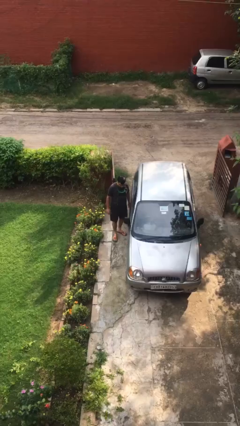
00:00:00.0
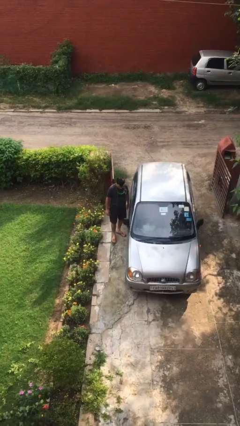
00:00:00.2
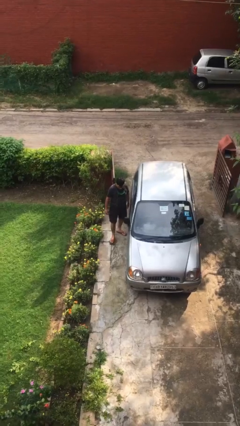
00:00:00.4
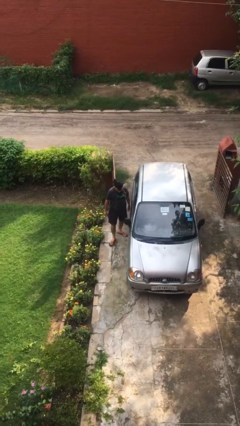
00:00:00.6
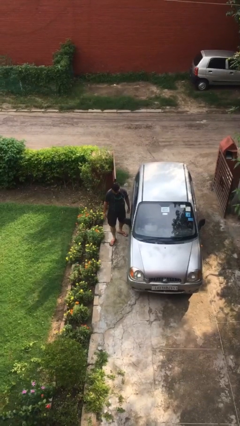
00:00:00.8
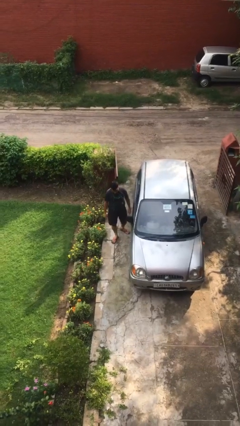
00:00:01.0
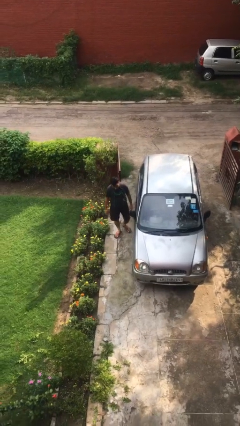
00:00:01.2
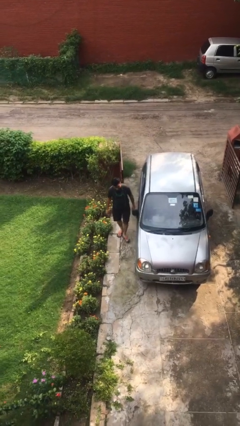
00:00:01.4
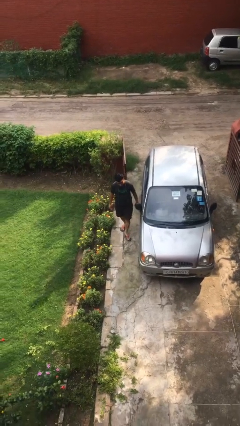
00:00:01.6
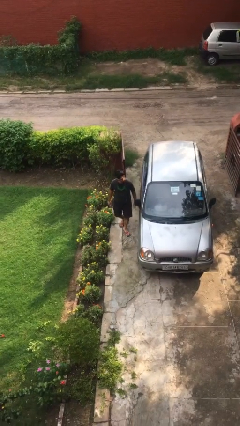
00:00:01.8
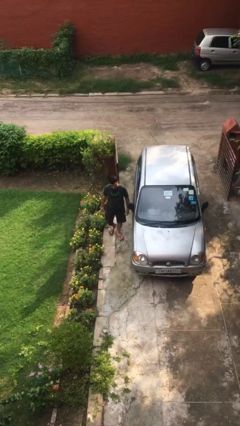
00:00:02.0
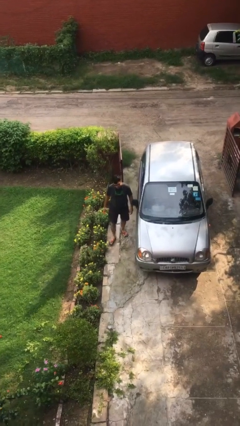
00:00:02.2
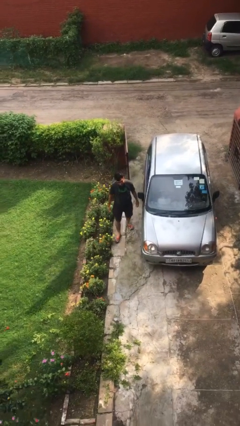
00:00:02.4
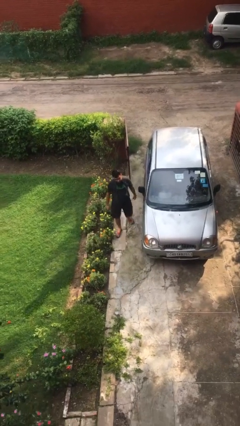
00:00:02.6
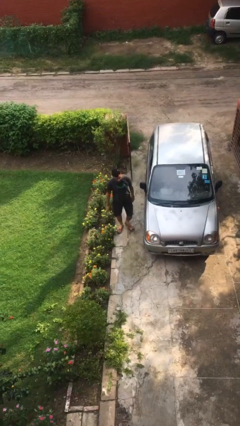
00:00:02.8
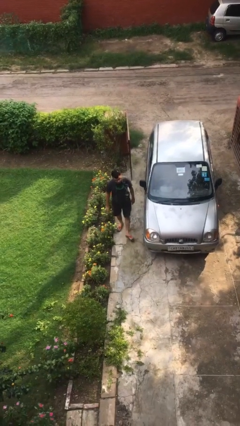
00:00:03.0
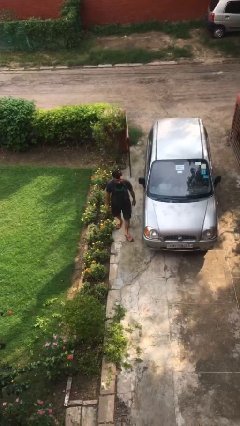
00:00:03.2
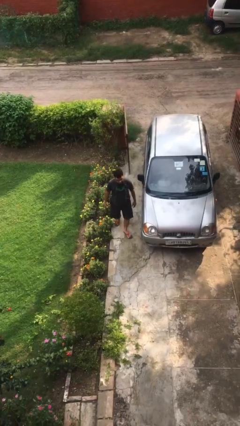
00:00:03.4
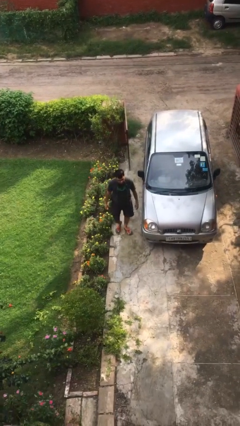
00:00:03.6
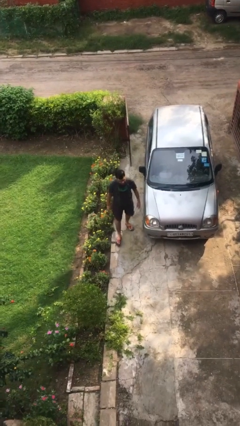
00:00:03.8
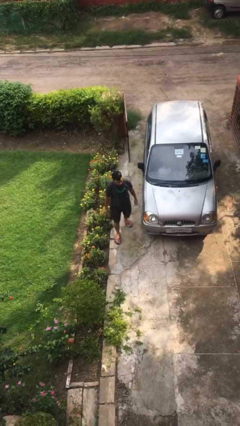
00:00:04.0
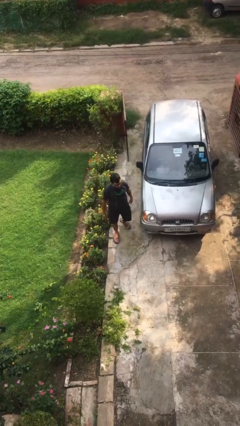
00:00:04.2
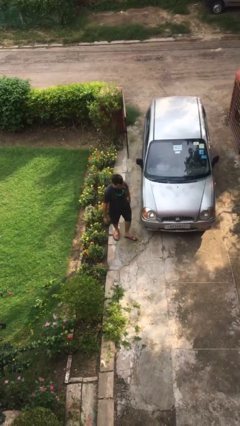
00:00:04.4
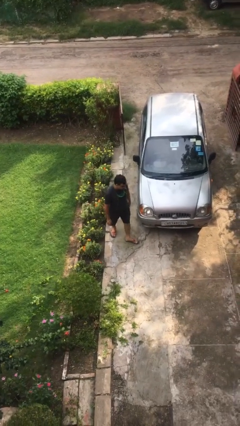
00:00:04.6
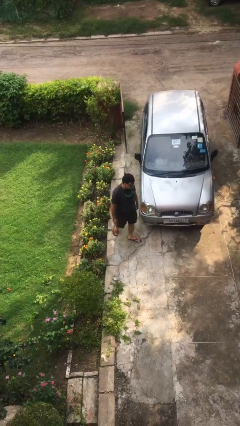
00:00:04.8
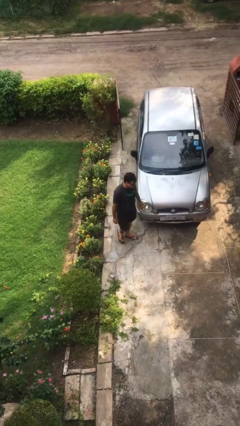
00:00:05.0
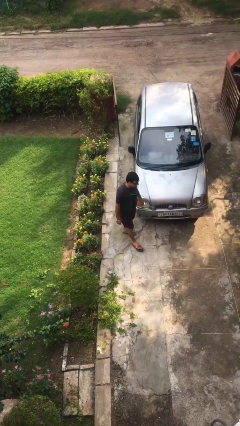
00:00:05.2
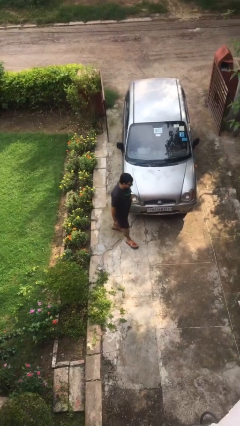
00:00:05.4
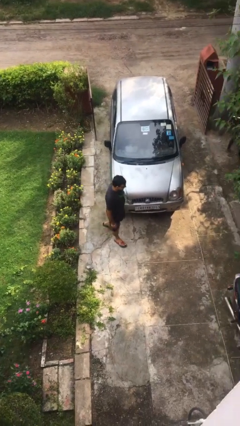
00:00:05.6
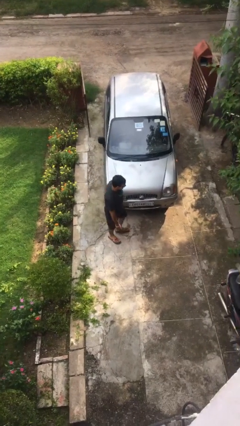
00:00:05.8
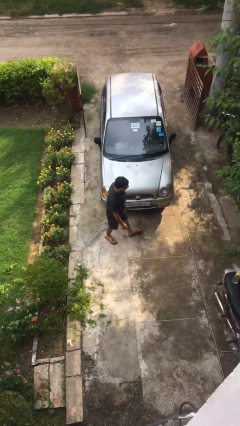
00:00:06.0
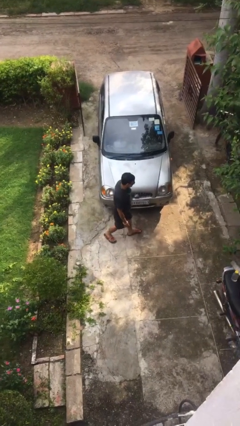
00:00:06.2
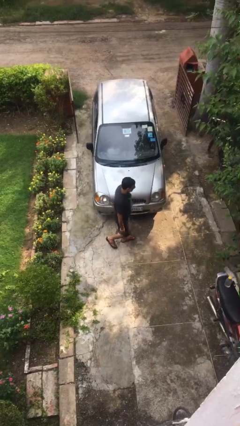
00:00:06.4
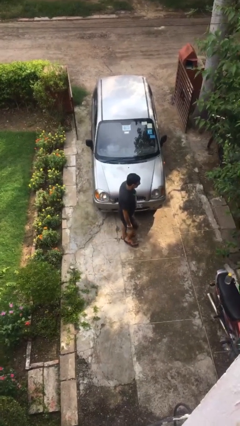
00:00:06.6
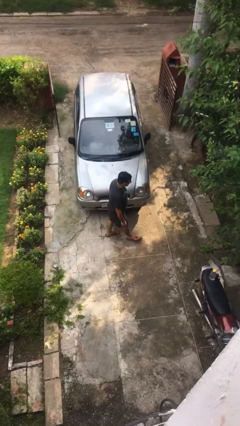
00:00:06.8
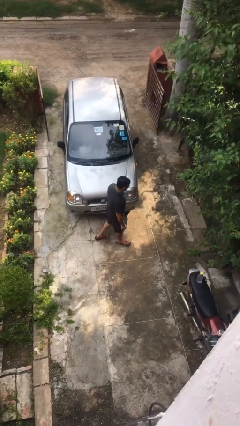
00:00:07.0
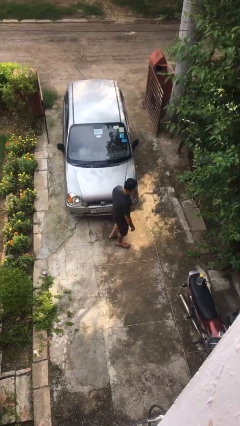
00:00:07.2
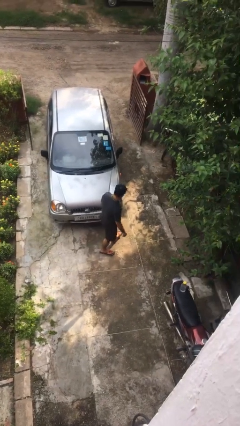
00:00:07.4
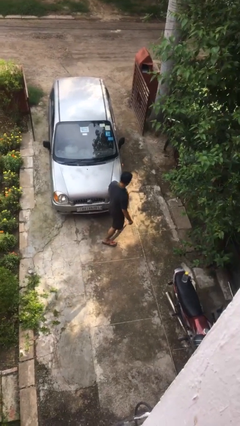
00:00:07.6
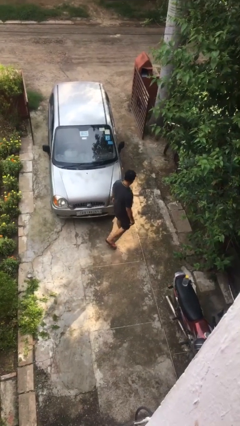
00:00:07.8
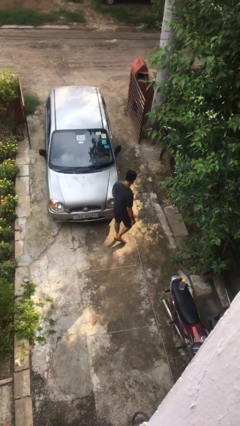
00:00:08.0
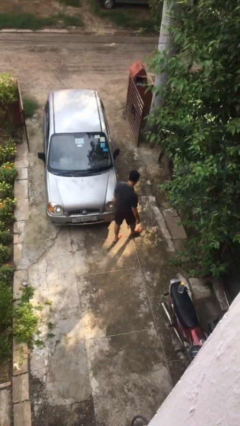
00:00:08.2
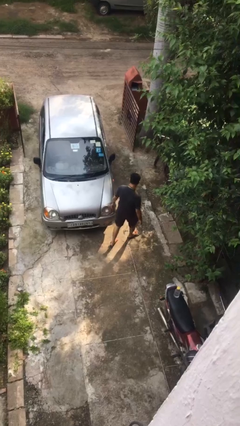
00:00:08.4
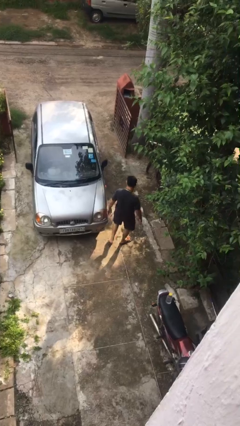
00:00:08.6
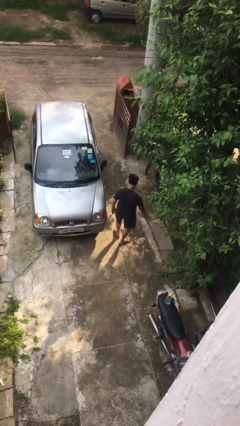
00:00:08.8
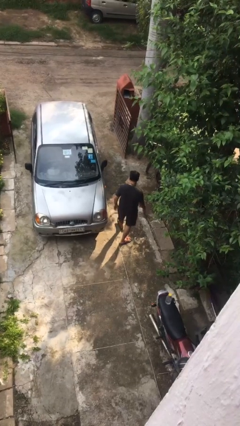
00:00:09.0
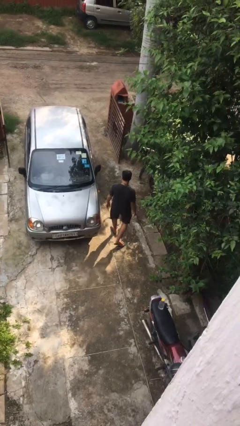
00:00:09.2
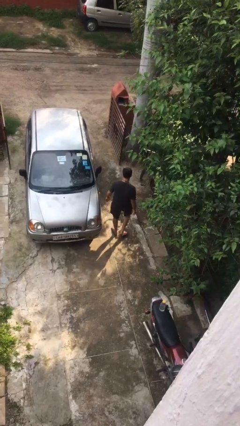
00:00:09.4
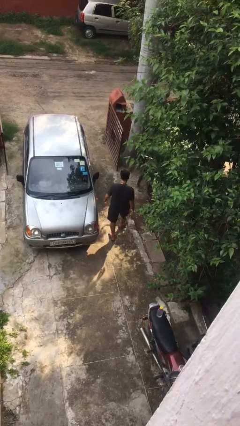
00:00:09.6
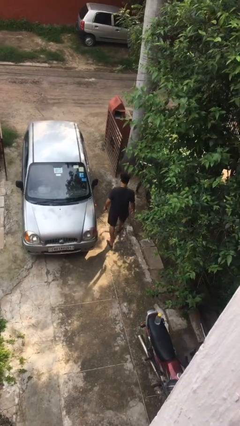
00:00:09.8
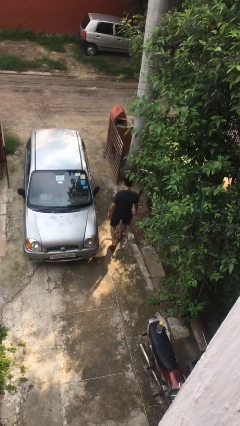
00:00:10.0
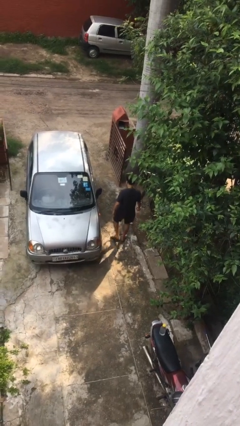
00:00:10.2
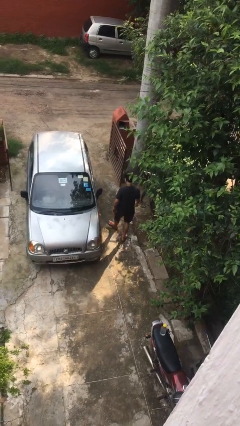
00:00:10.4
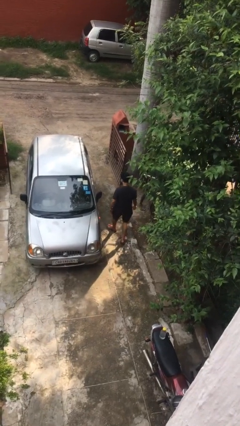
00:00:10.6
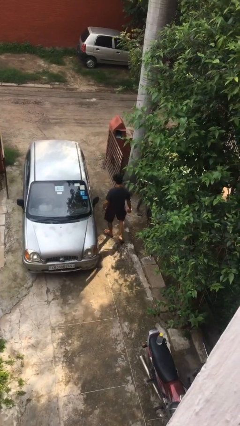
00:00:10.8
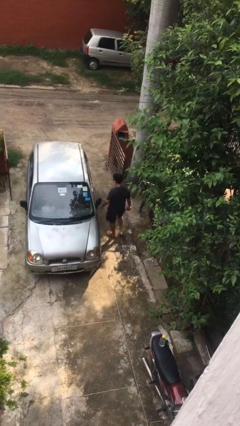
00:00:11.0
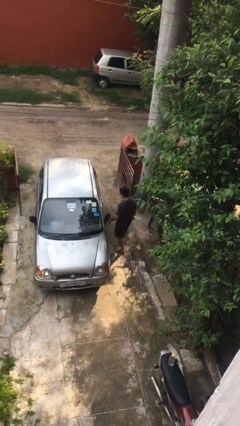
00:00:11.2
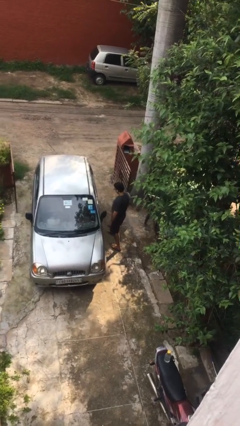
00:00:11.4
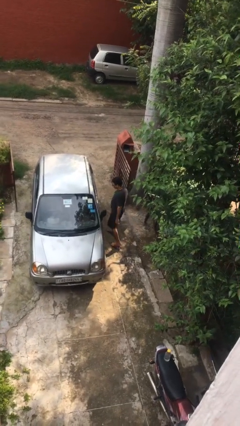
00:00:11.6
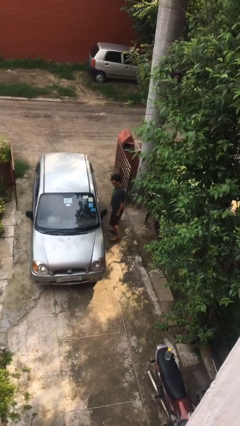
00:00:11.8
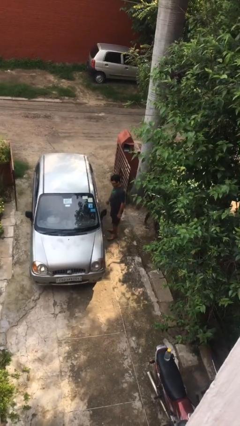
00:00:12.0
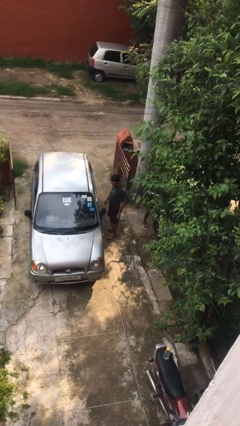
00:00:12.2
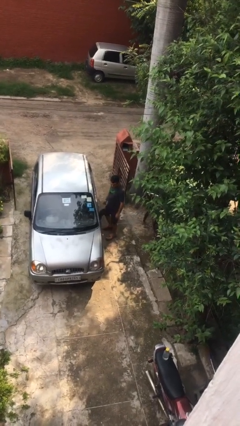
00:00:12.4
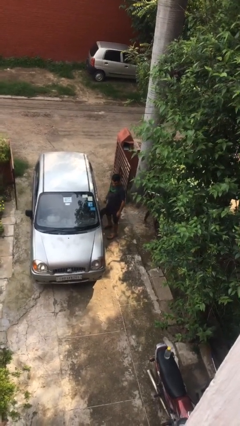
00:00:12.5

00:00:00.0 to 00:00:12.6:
person walks around car

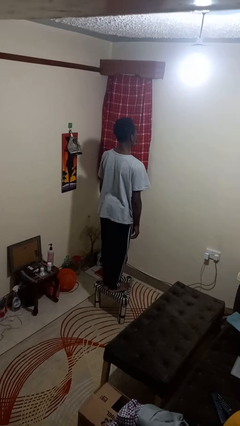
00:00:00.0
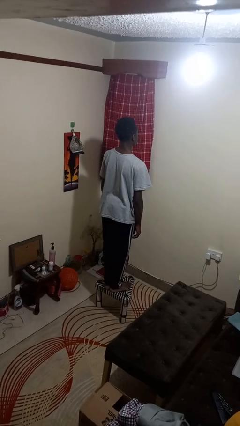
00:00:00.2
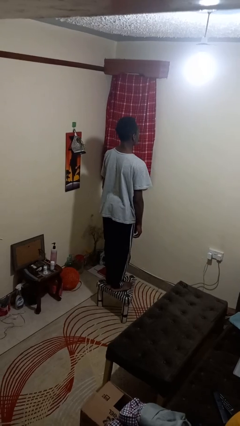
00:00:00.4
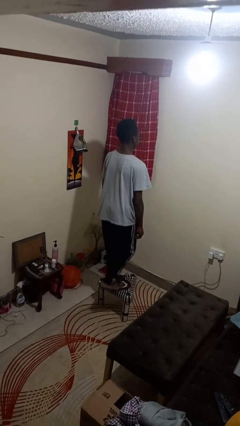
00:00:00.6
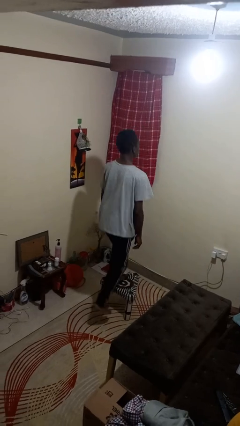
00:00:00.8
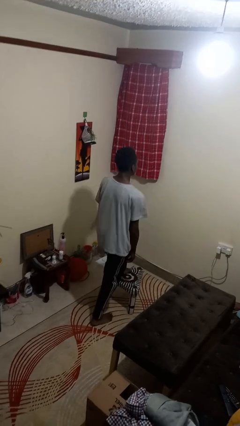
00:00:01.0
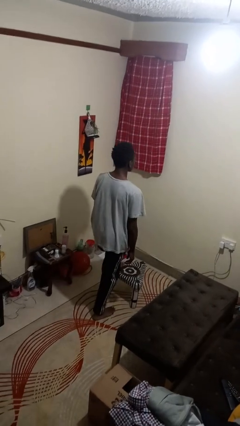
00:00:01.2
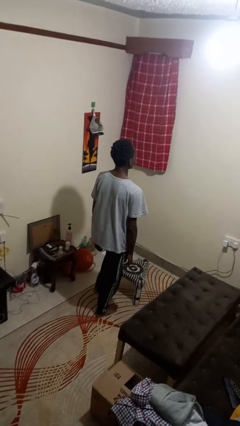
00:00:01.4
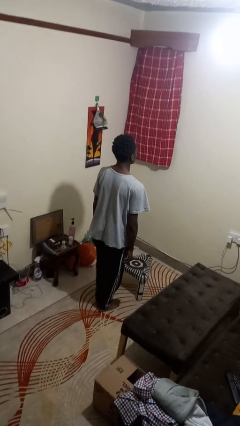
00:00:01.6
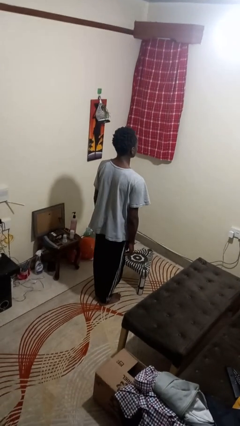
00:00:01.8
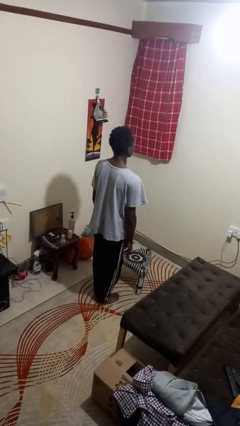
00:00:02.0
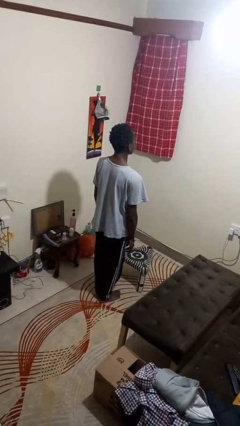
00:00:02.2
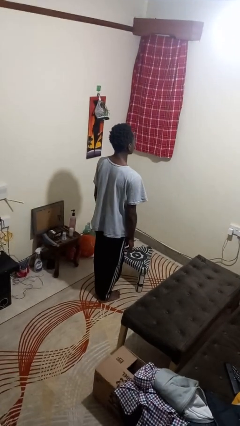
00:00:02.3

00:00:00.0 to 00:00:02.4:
person climbs off chair

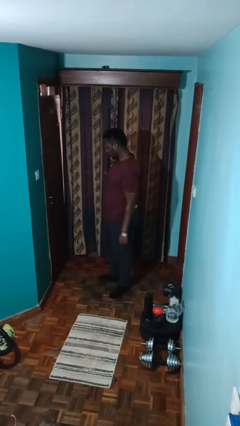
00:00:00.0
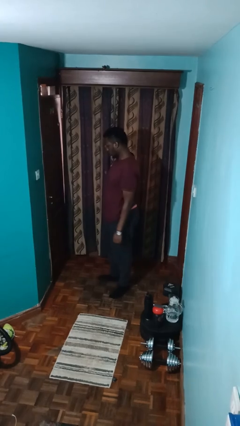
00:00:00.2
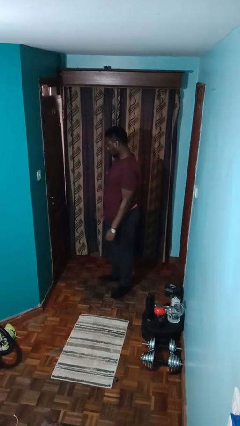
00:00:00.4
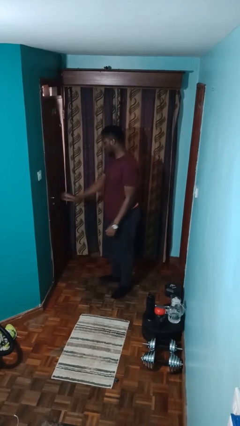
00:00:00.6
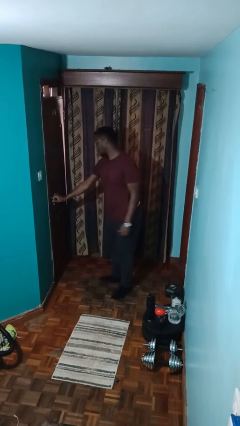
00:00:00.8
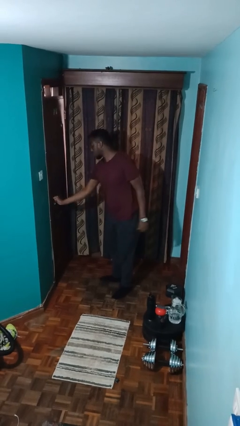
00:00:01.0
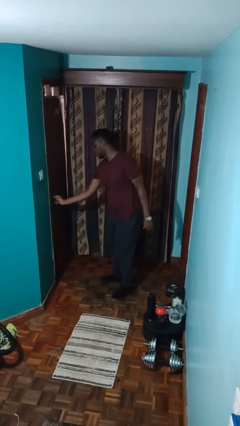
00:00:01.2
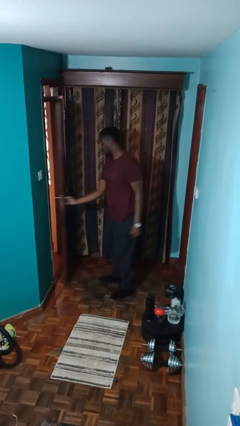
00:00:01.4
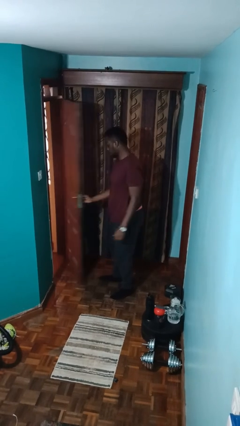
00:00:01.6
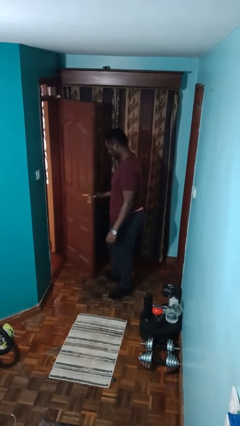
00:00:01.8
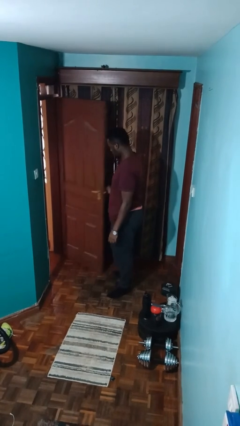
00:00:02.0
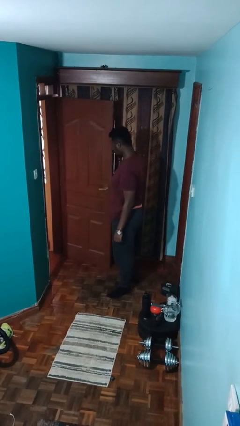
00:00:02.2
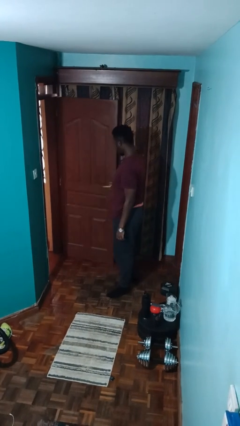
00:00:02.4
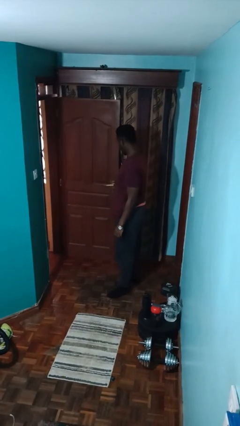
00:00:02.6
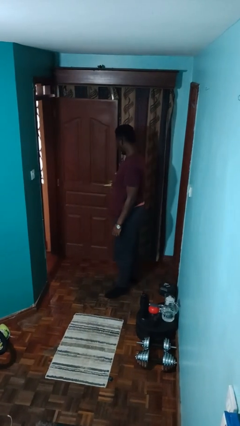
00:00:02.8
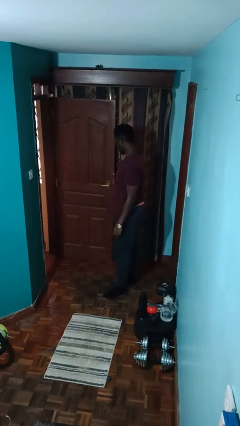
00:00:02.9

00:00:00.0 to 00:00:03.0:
person opens facility door

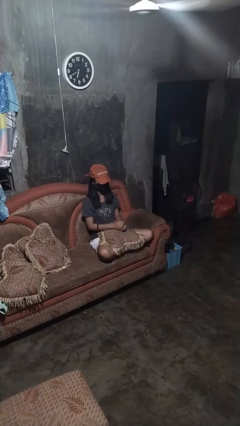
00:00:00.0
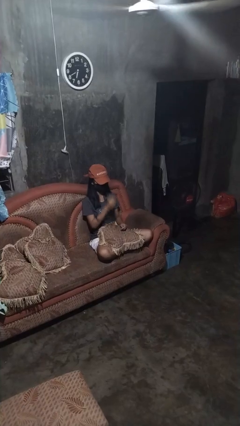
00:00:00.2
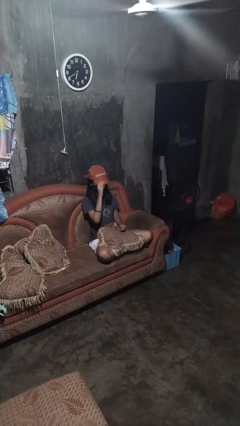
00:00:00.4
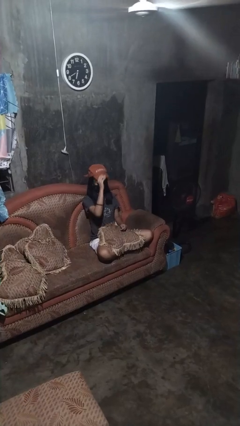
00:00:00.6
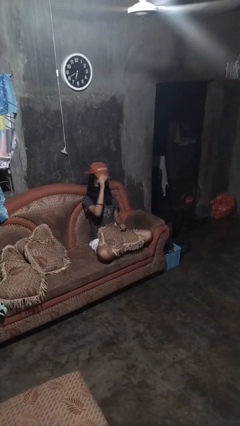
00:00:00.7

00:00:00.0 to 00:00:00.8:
person takes off hat
